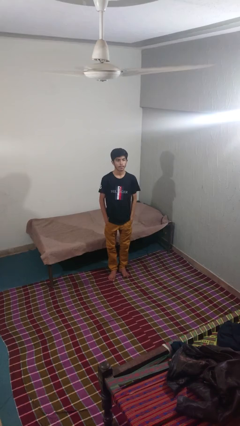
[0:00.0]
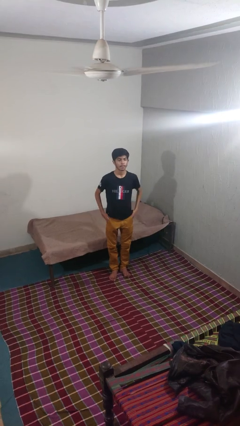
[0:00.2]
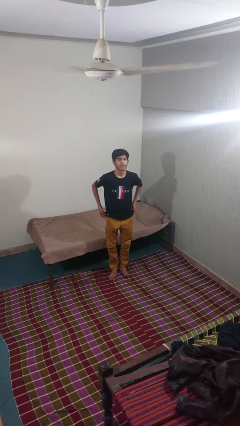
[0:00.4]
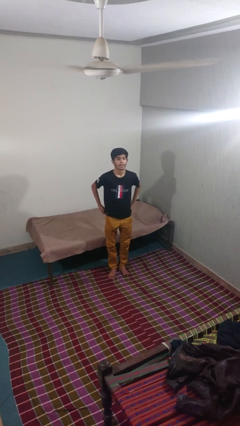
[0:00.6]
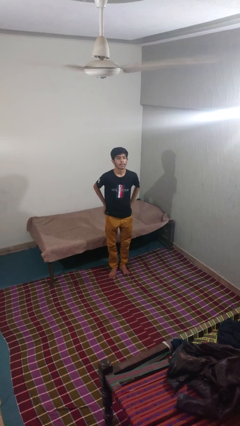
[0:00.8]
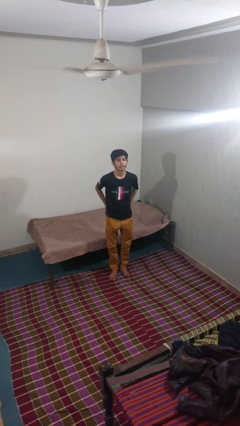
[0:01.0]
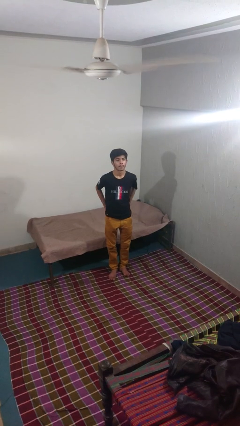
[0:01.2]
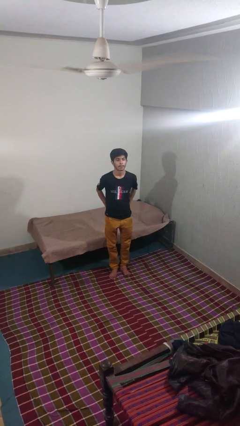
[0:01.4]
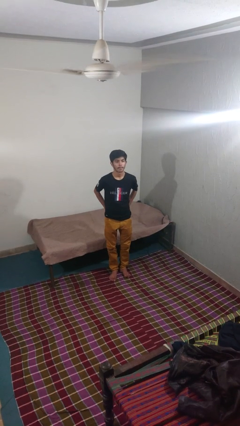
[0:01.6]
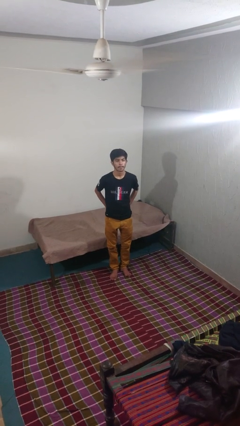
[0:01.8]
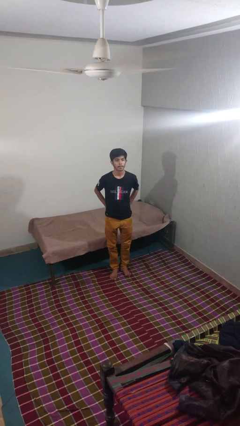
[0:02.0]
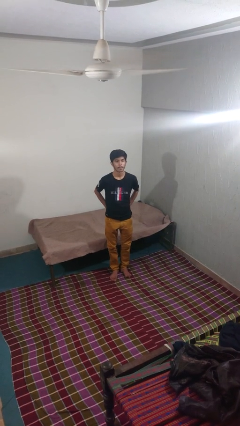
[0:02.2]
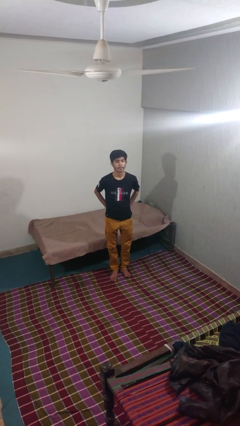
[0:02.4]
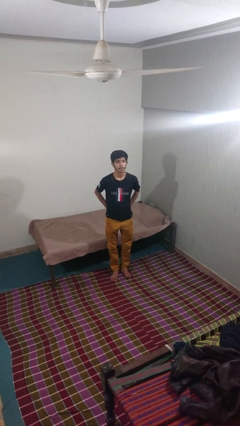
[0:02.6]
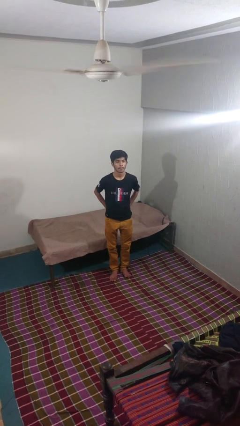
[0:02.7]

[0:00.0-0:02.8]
person puts hands in back pockets

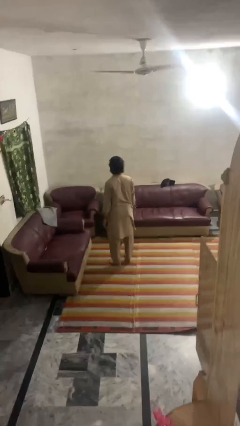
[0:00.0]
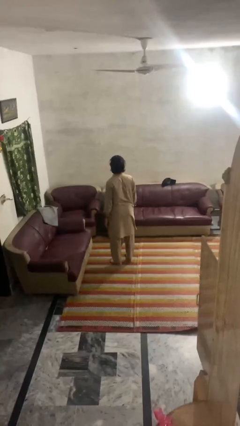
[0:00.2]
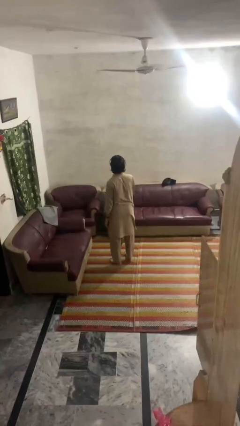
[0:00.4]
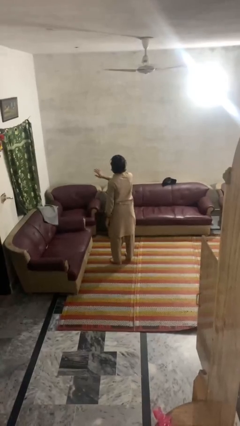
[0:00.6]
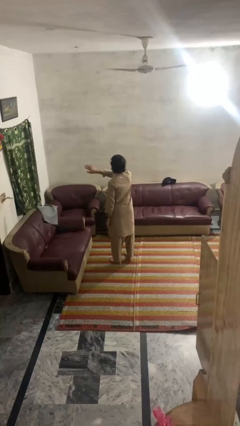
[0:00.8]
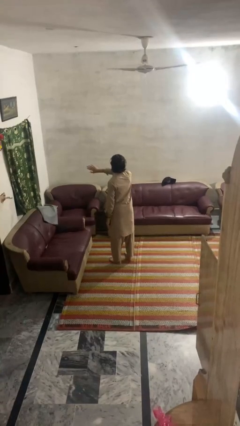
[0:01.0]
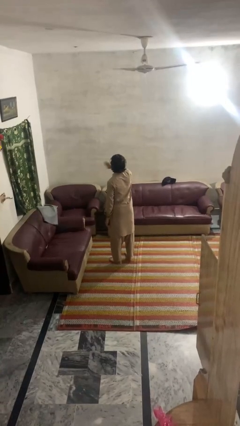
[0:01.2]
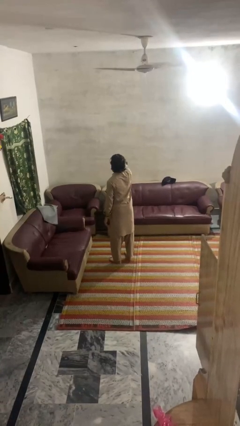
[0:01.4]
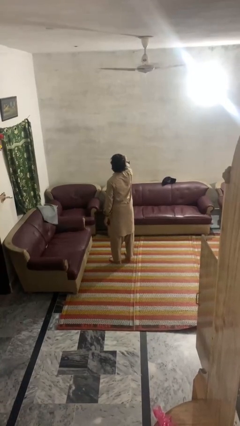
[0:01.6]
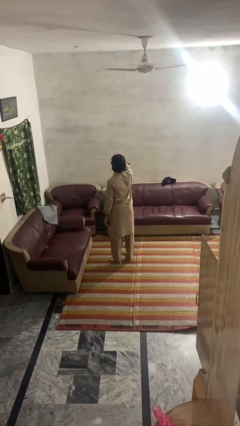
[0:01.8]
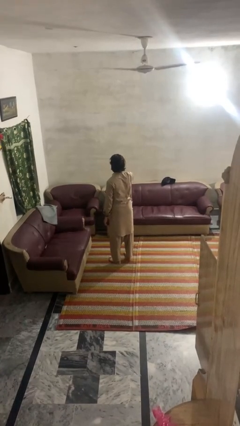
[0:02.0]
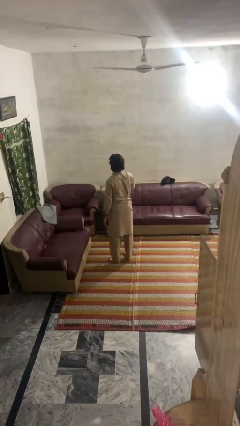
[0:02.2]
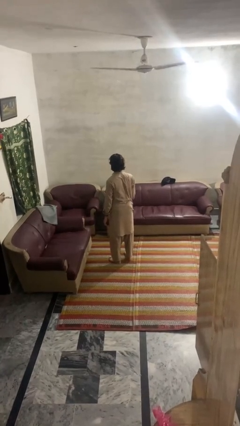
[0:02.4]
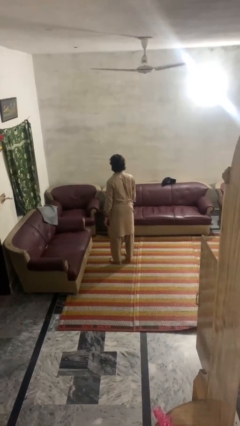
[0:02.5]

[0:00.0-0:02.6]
person gestures swipe right

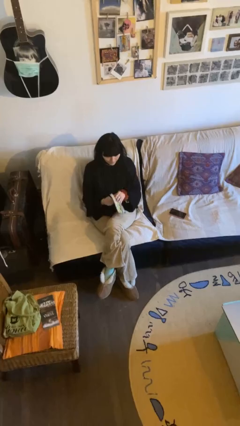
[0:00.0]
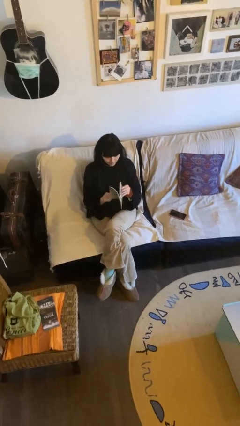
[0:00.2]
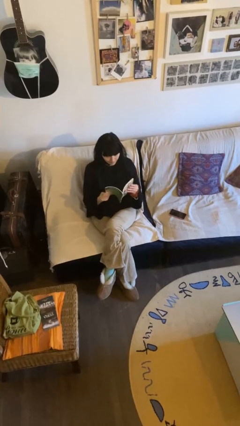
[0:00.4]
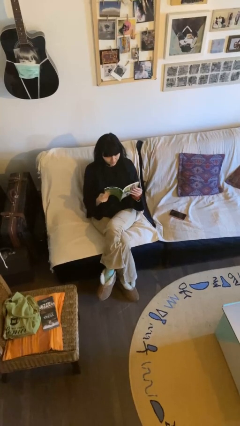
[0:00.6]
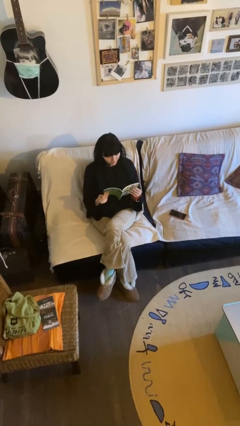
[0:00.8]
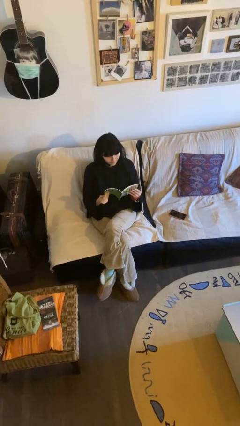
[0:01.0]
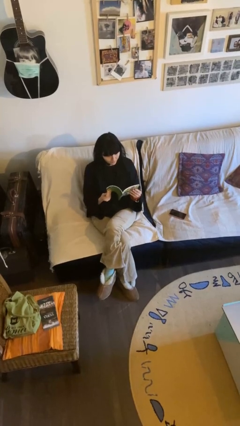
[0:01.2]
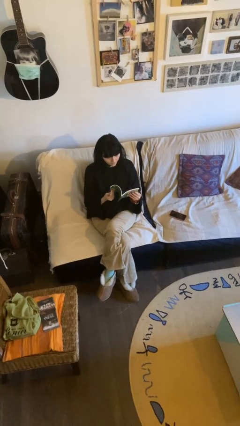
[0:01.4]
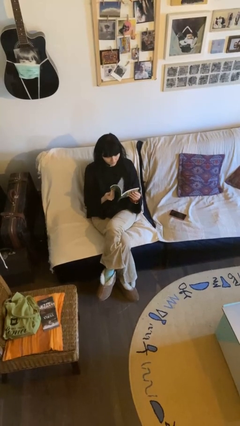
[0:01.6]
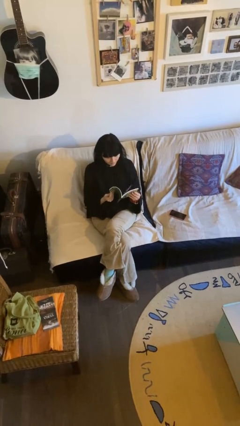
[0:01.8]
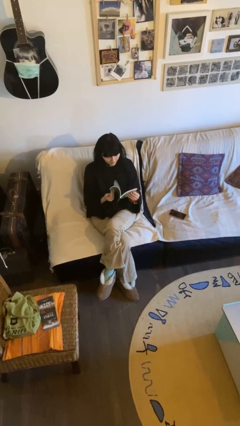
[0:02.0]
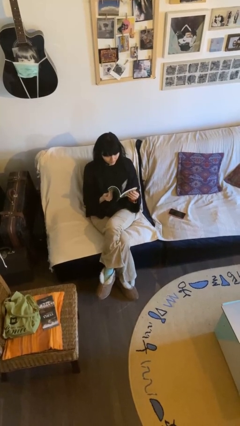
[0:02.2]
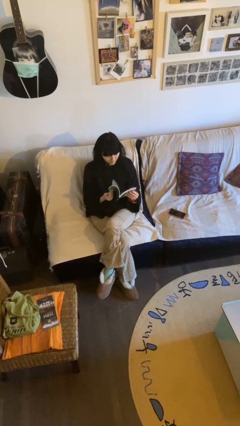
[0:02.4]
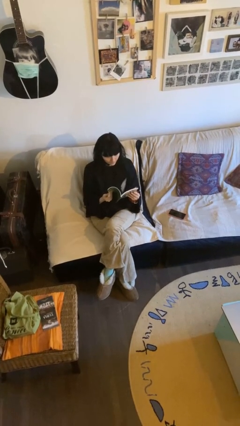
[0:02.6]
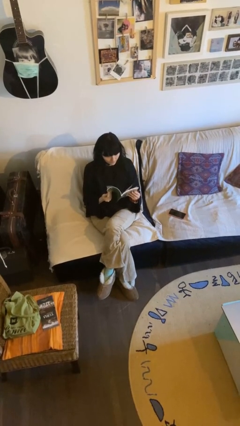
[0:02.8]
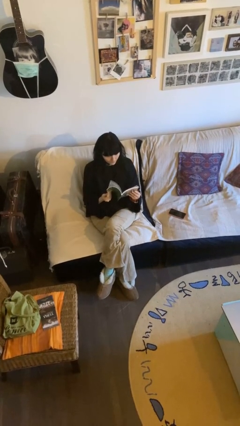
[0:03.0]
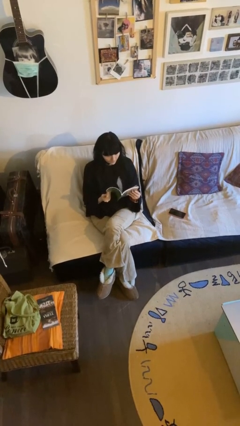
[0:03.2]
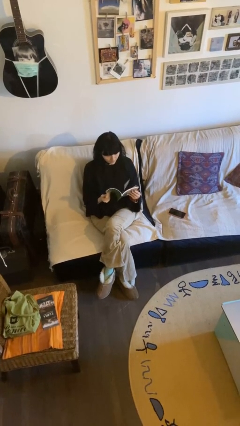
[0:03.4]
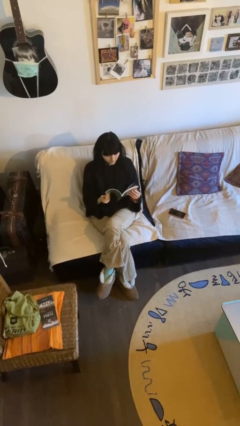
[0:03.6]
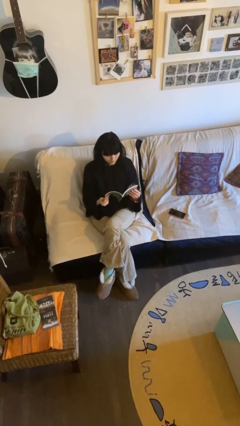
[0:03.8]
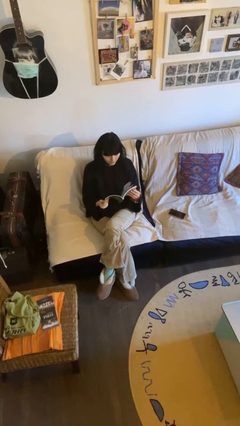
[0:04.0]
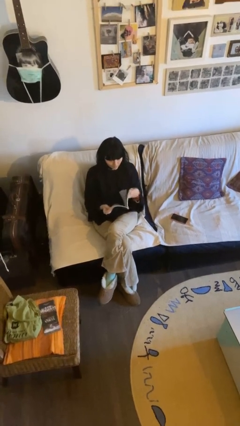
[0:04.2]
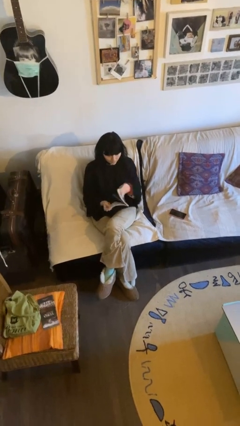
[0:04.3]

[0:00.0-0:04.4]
person reads document

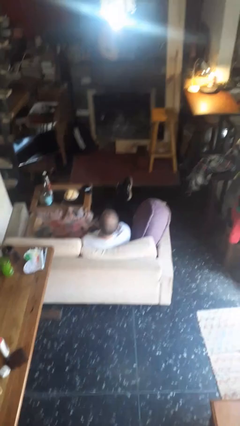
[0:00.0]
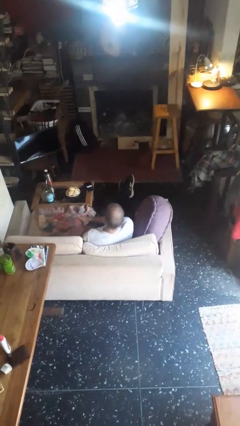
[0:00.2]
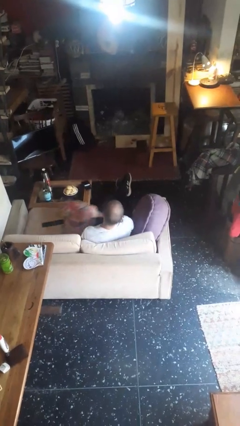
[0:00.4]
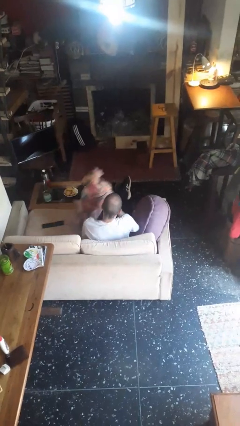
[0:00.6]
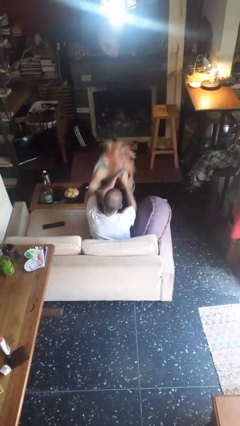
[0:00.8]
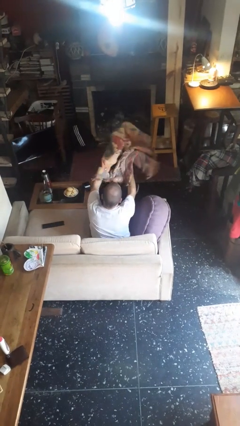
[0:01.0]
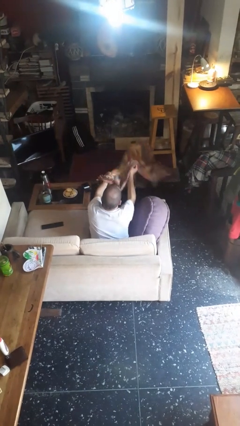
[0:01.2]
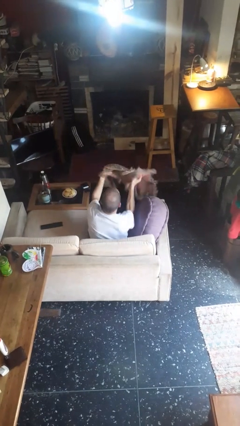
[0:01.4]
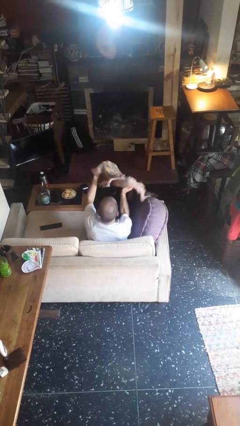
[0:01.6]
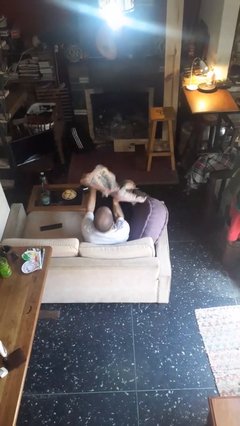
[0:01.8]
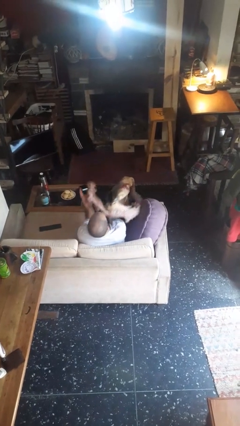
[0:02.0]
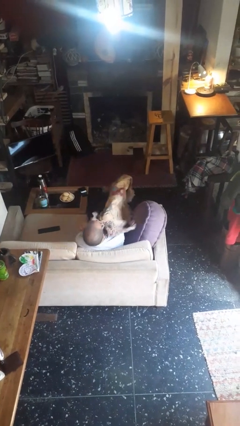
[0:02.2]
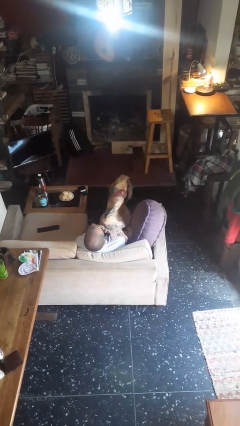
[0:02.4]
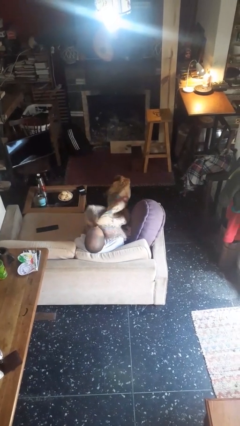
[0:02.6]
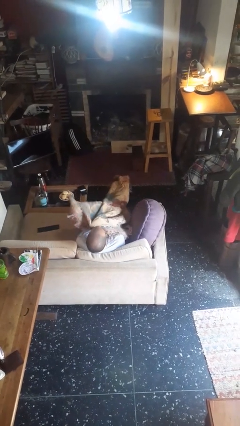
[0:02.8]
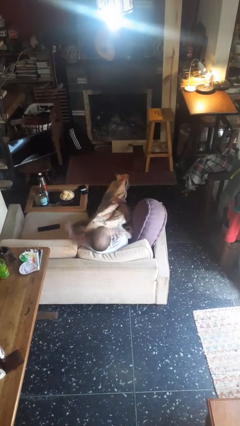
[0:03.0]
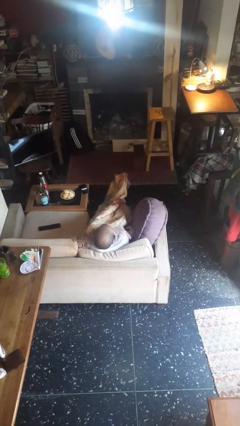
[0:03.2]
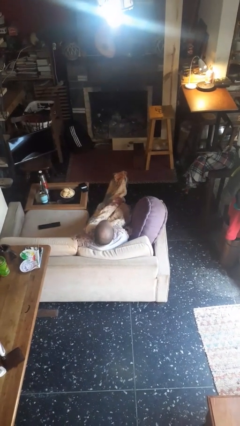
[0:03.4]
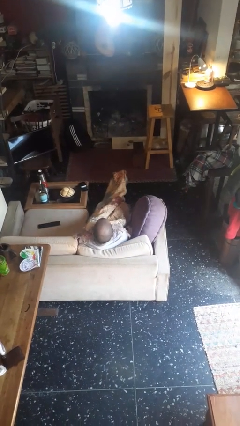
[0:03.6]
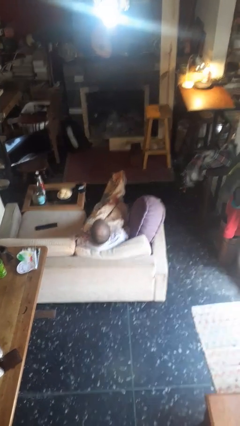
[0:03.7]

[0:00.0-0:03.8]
person covers with blanket

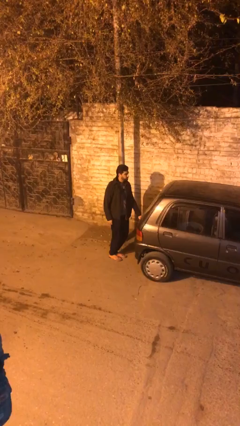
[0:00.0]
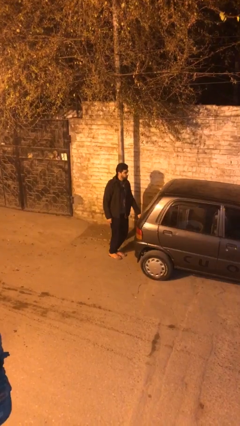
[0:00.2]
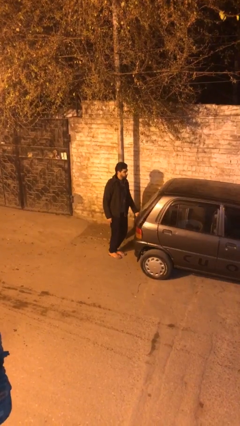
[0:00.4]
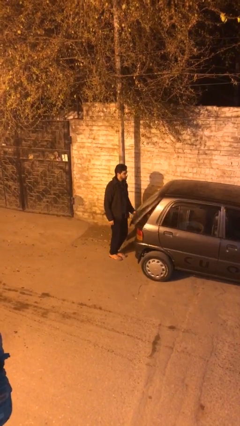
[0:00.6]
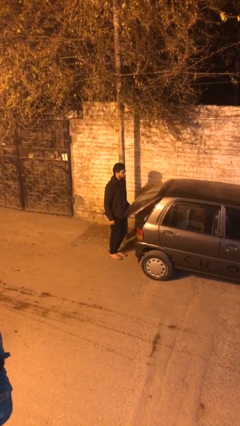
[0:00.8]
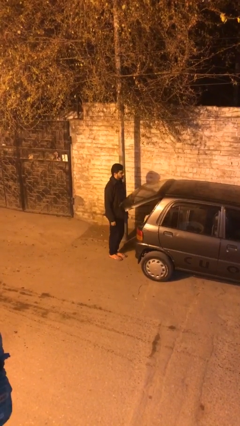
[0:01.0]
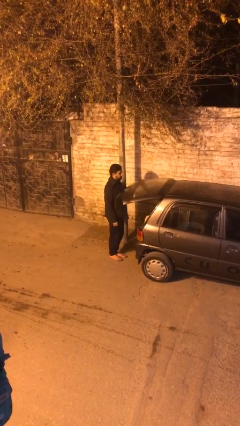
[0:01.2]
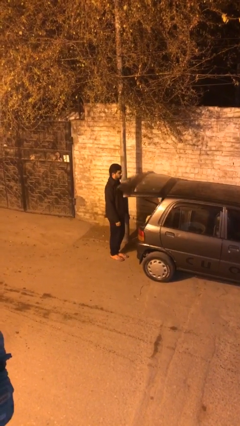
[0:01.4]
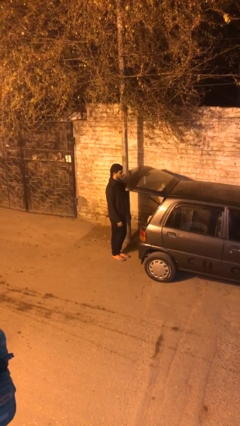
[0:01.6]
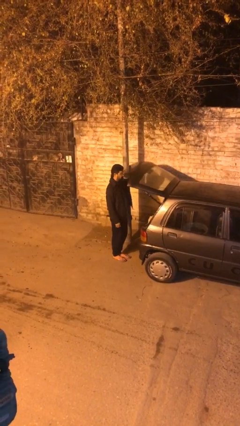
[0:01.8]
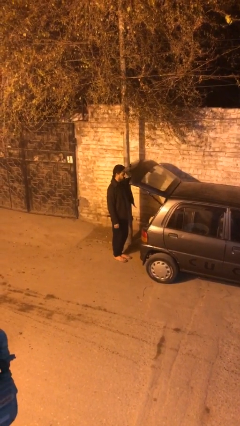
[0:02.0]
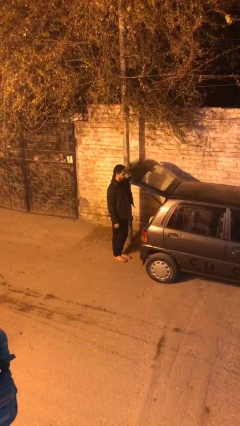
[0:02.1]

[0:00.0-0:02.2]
person opens car trunk

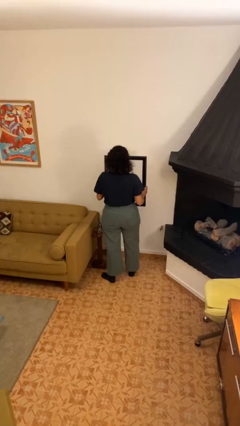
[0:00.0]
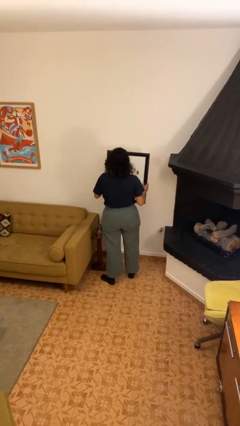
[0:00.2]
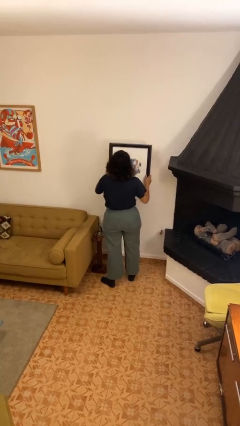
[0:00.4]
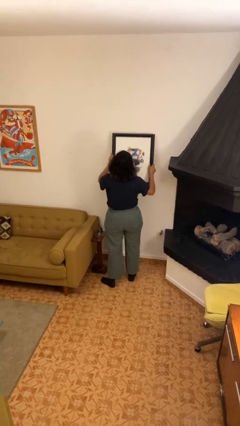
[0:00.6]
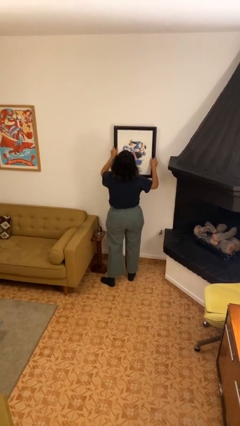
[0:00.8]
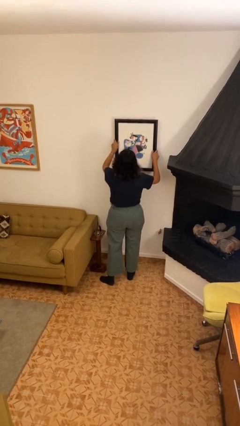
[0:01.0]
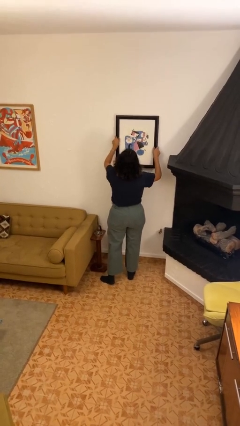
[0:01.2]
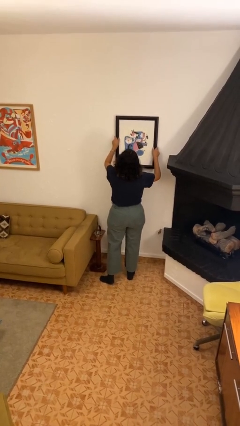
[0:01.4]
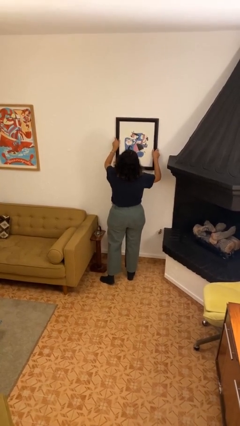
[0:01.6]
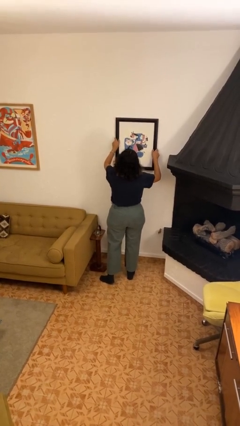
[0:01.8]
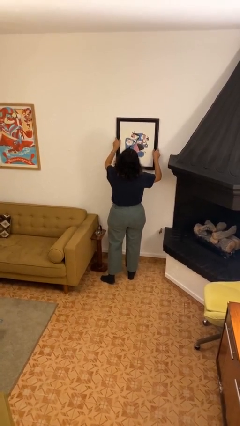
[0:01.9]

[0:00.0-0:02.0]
person puts up picture frame
